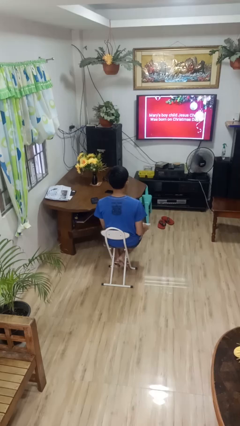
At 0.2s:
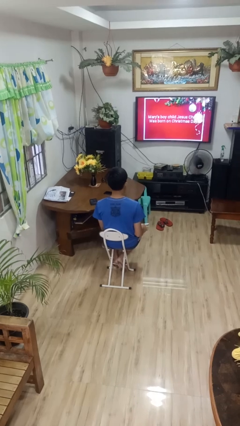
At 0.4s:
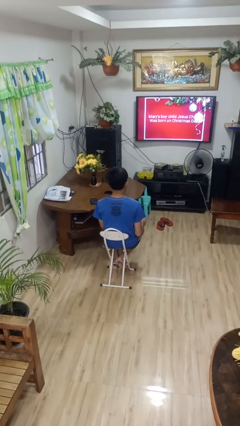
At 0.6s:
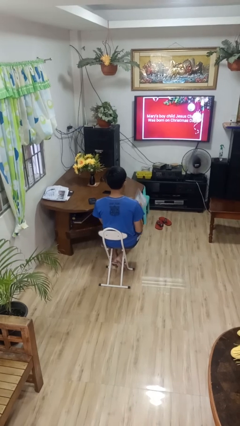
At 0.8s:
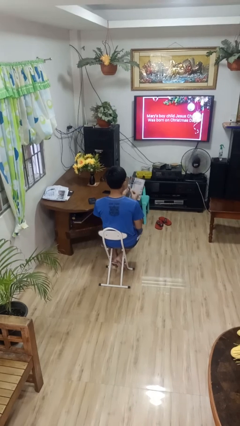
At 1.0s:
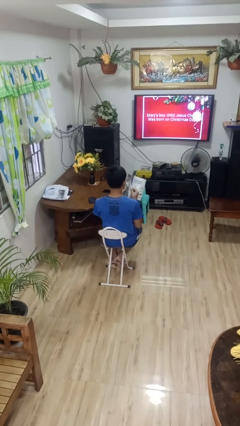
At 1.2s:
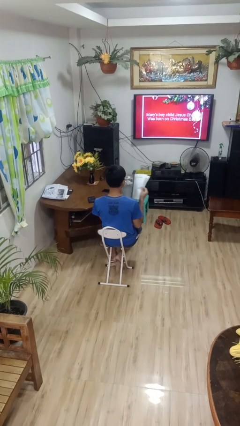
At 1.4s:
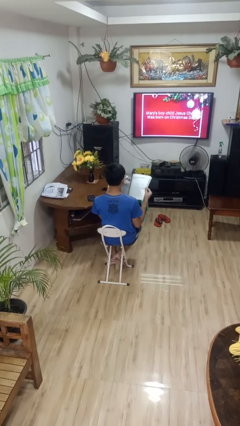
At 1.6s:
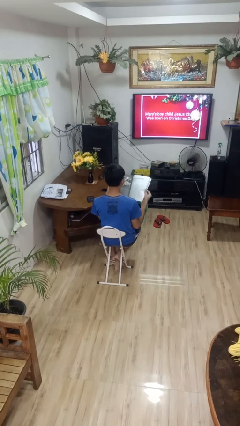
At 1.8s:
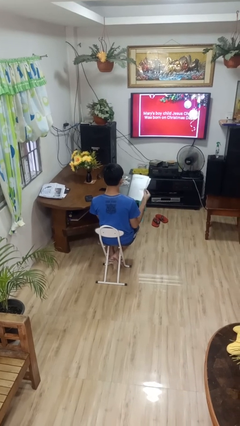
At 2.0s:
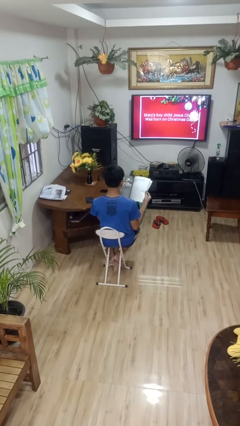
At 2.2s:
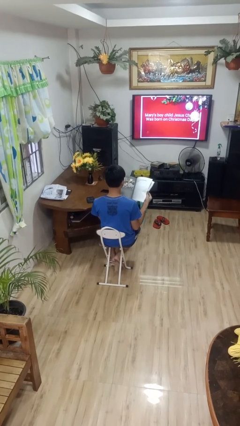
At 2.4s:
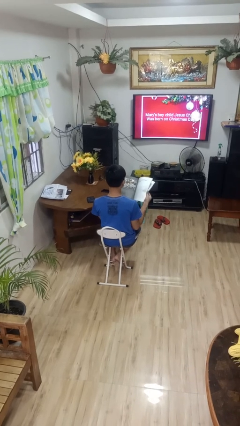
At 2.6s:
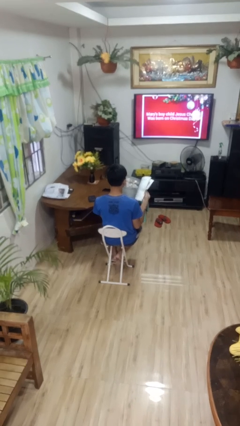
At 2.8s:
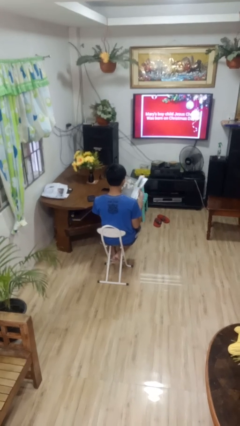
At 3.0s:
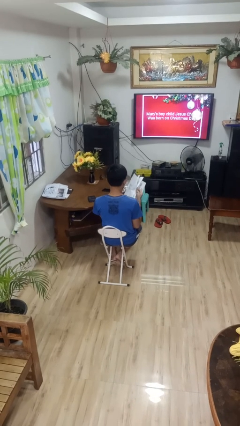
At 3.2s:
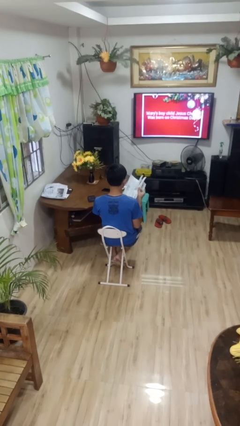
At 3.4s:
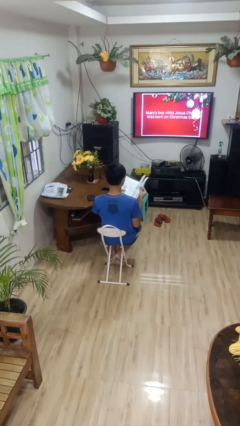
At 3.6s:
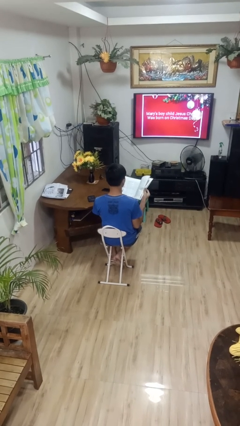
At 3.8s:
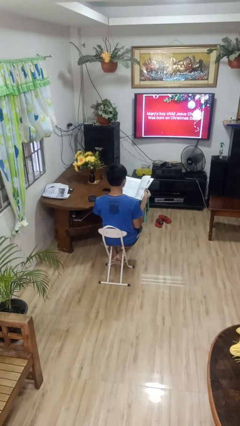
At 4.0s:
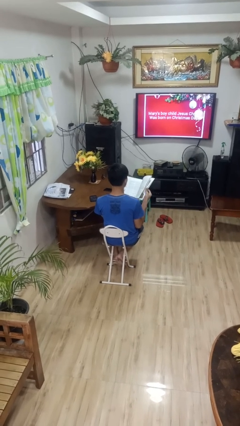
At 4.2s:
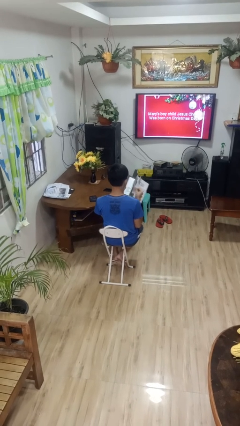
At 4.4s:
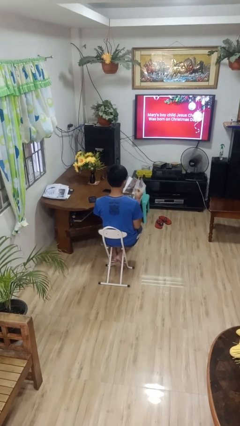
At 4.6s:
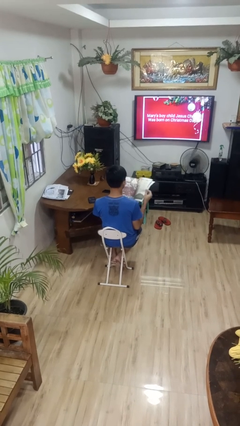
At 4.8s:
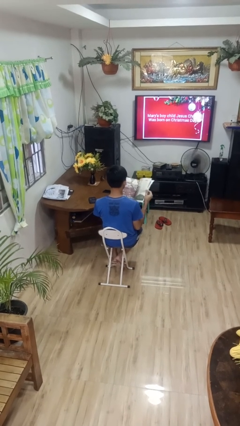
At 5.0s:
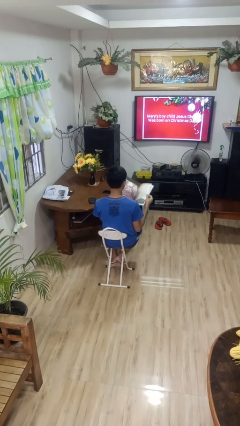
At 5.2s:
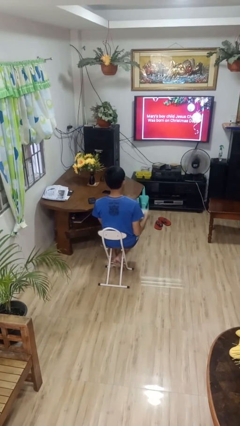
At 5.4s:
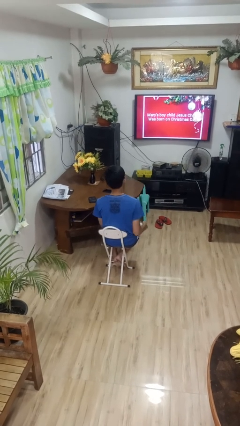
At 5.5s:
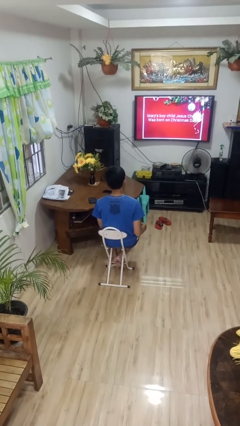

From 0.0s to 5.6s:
person reads magazine

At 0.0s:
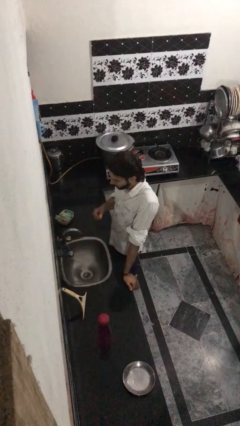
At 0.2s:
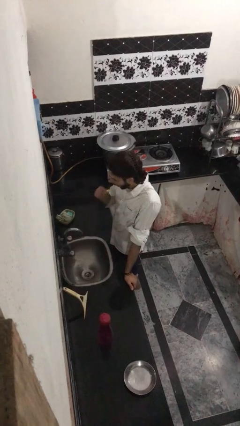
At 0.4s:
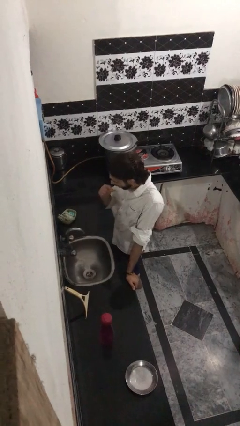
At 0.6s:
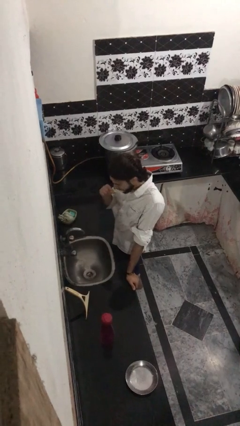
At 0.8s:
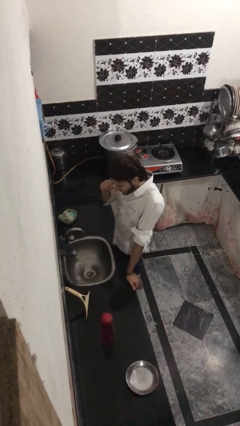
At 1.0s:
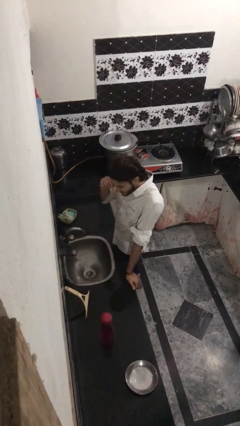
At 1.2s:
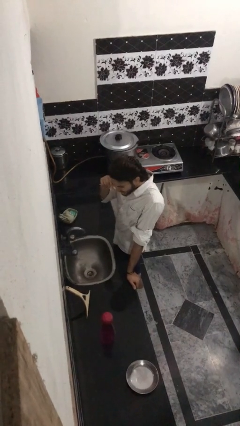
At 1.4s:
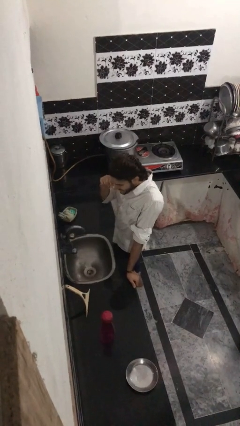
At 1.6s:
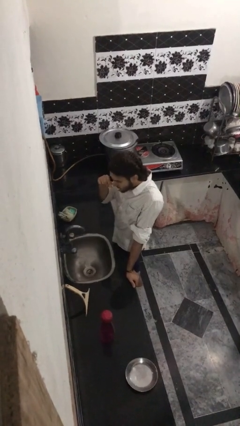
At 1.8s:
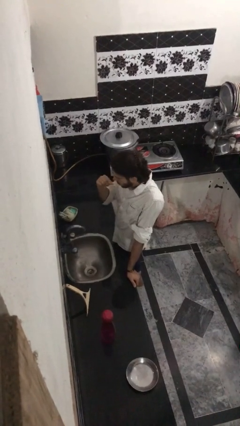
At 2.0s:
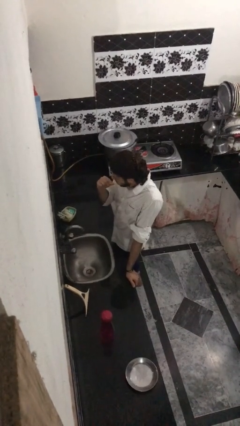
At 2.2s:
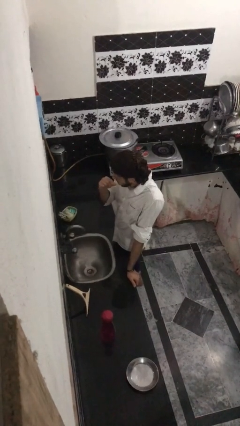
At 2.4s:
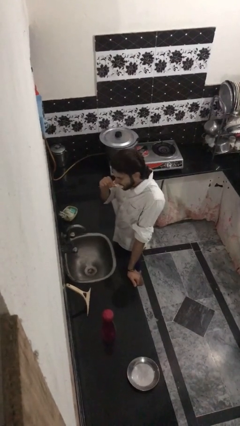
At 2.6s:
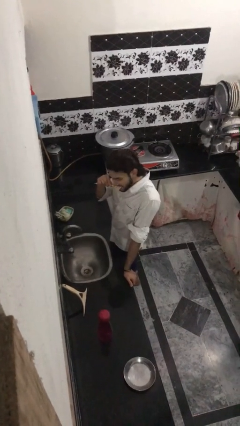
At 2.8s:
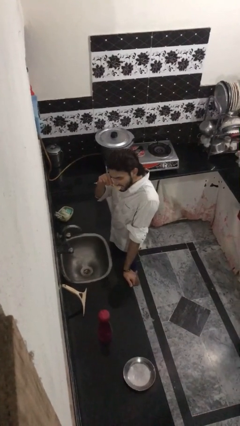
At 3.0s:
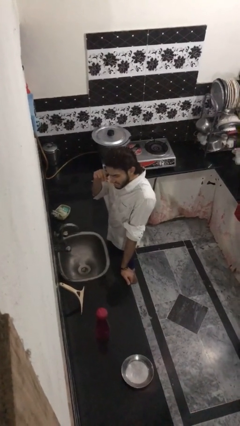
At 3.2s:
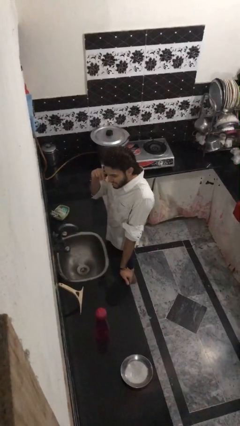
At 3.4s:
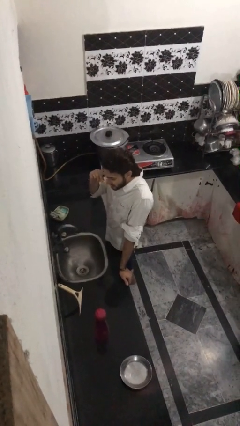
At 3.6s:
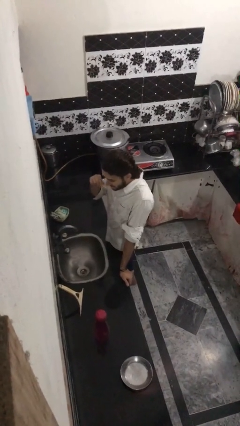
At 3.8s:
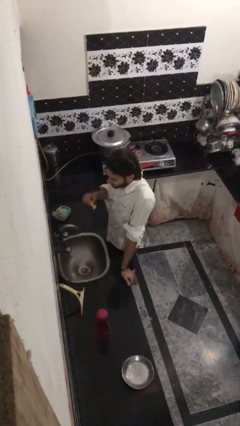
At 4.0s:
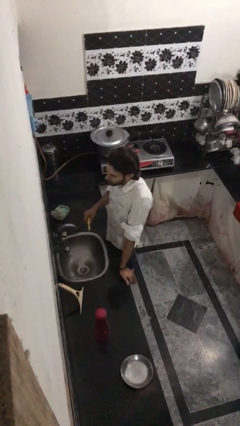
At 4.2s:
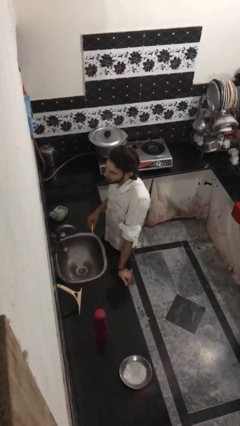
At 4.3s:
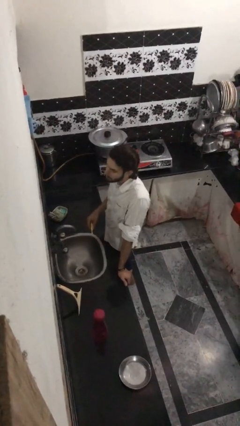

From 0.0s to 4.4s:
person brushes teeth

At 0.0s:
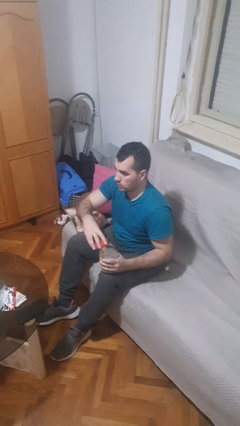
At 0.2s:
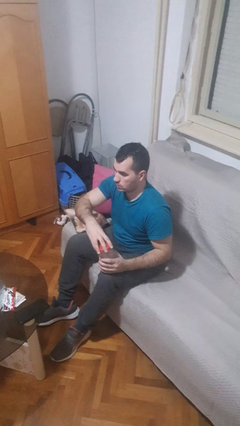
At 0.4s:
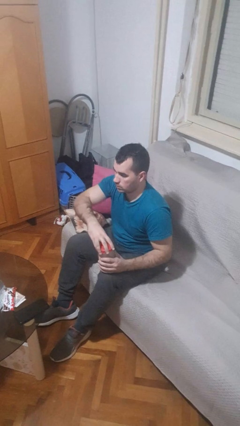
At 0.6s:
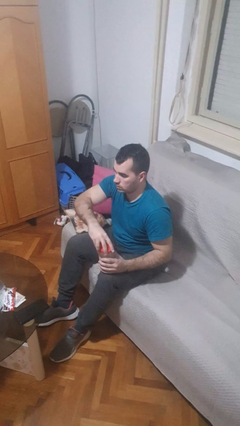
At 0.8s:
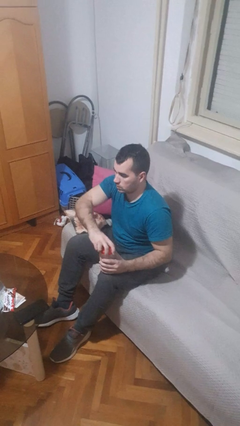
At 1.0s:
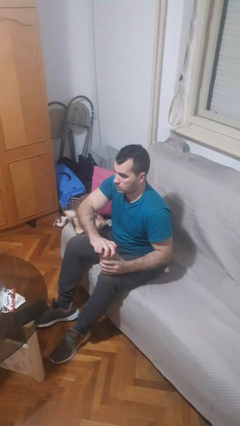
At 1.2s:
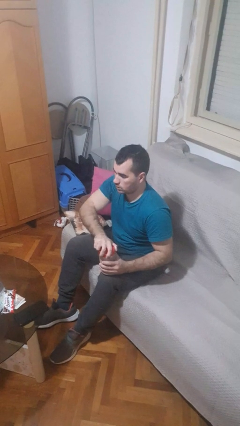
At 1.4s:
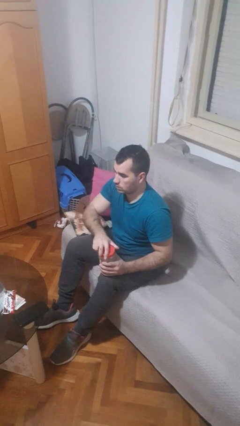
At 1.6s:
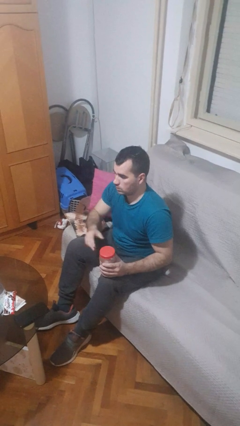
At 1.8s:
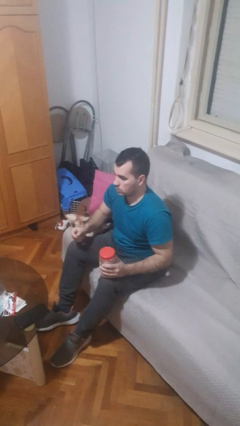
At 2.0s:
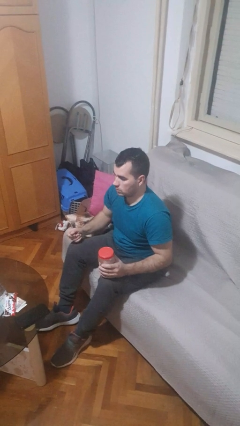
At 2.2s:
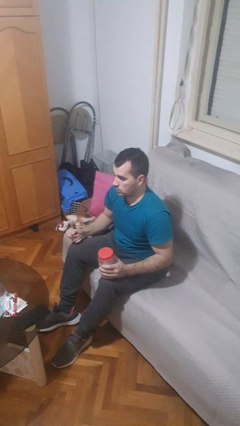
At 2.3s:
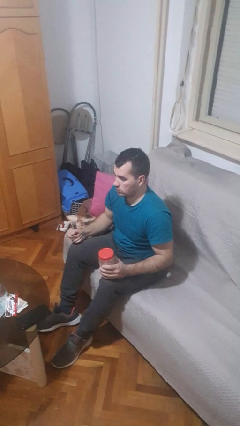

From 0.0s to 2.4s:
person closes jar

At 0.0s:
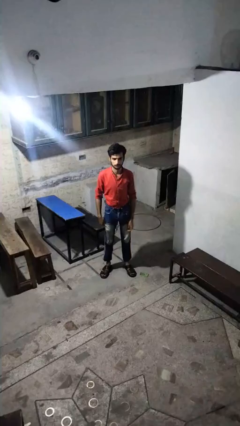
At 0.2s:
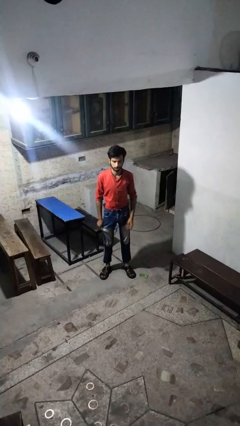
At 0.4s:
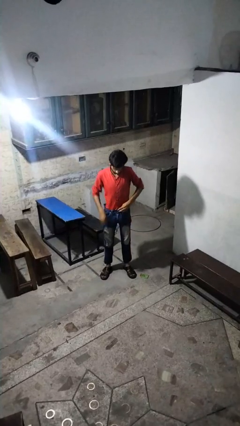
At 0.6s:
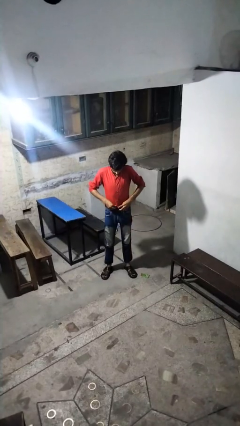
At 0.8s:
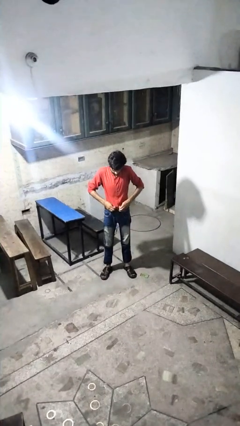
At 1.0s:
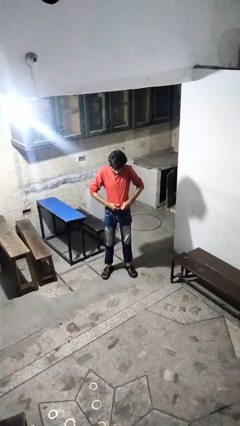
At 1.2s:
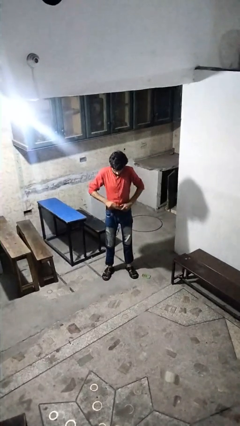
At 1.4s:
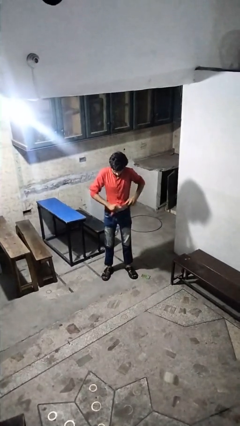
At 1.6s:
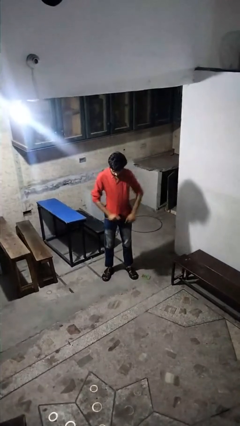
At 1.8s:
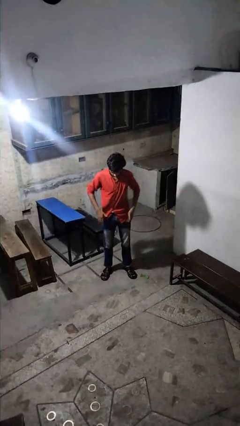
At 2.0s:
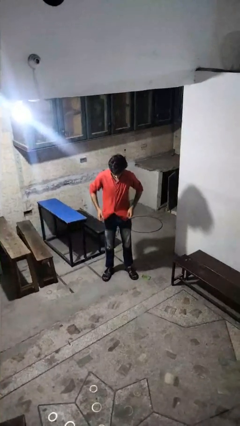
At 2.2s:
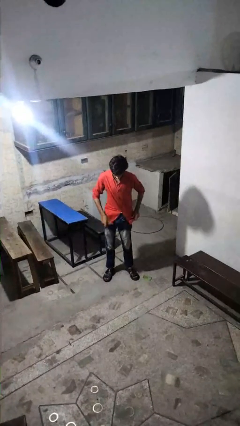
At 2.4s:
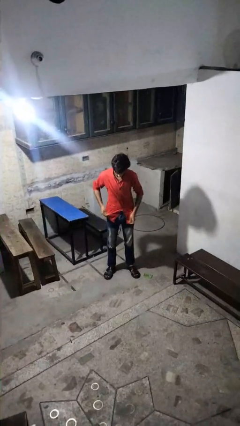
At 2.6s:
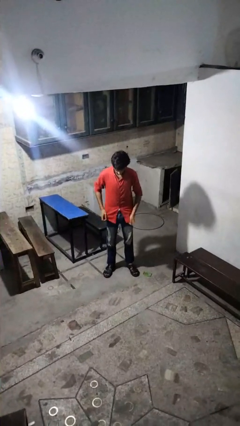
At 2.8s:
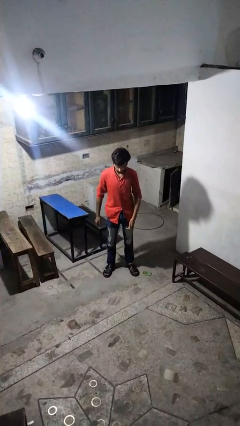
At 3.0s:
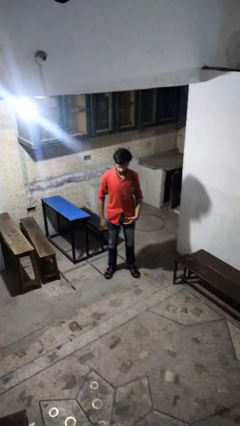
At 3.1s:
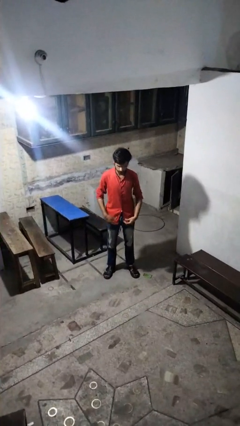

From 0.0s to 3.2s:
person untucks shirt

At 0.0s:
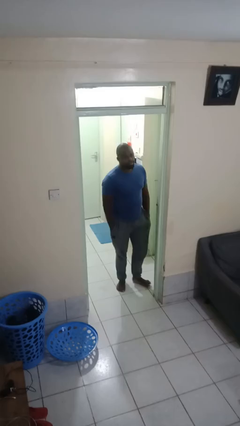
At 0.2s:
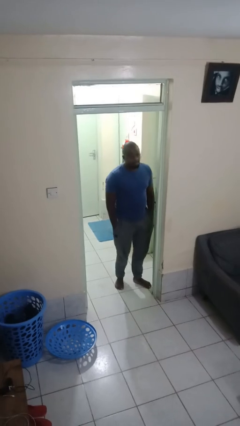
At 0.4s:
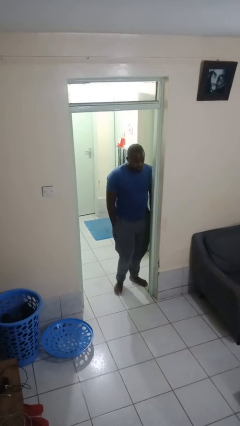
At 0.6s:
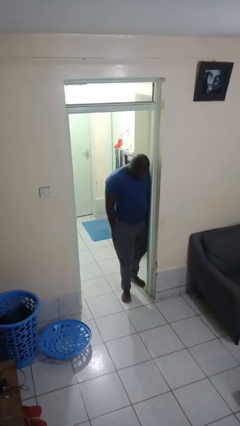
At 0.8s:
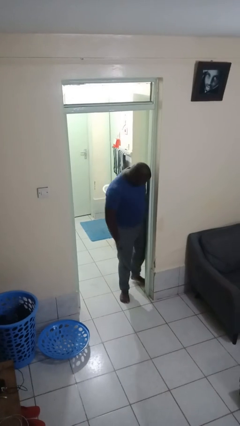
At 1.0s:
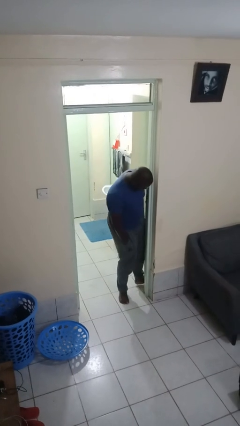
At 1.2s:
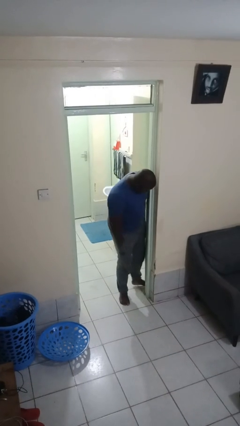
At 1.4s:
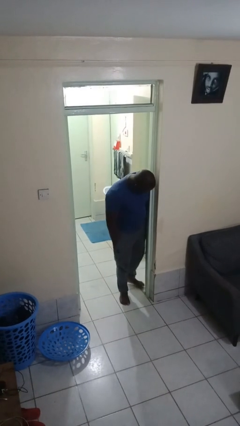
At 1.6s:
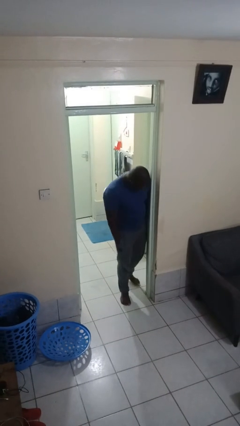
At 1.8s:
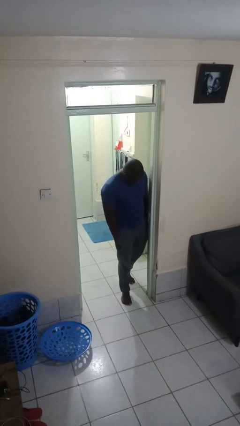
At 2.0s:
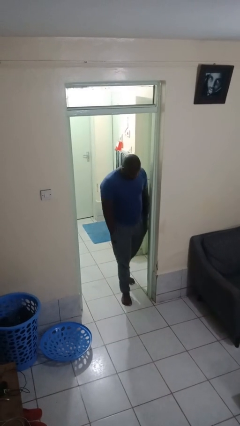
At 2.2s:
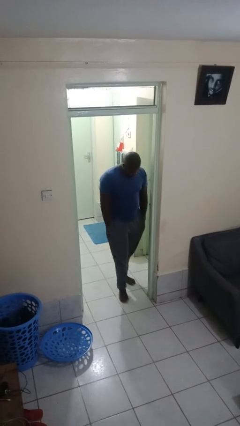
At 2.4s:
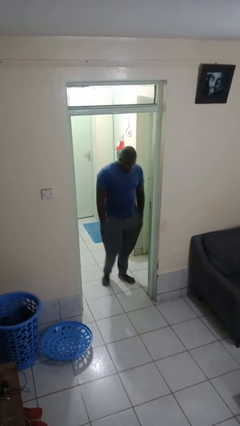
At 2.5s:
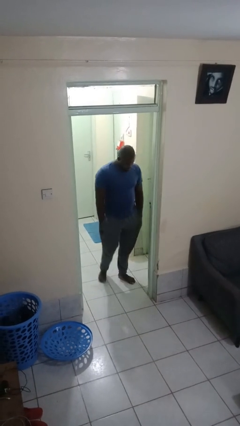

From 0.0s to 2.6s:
person bumps into wall
